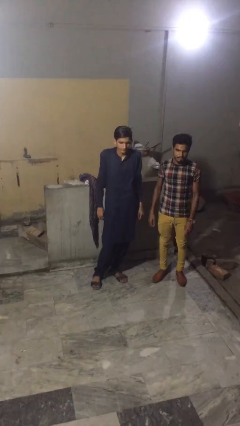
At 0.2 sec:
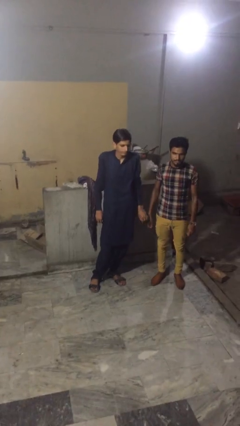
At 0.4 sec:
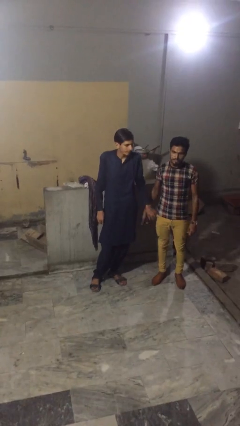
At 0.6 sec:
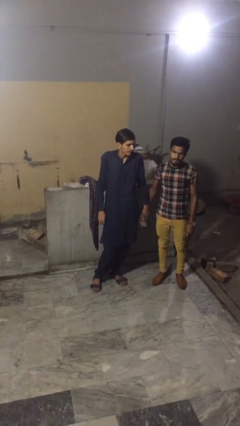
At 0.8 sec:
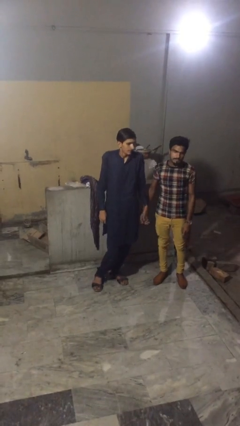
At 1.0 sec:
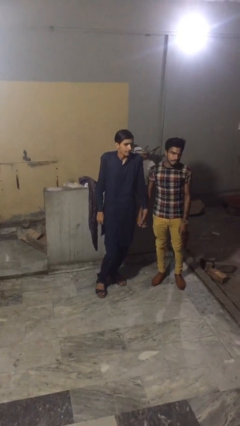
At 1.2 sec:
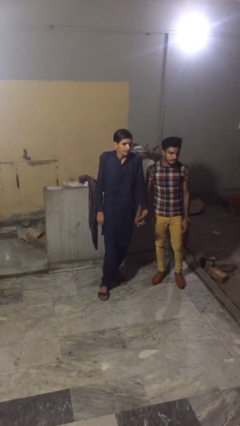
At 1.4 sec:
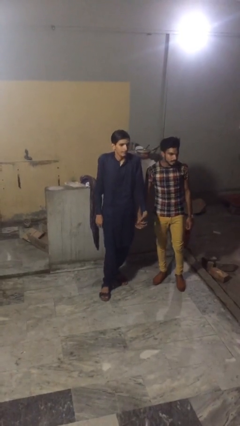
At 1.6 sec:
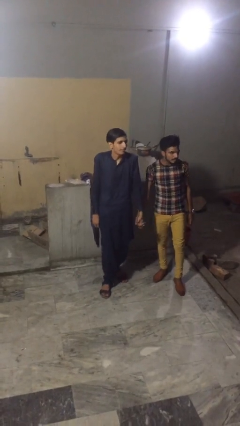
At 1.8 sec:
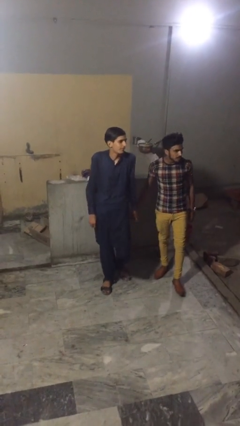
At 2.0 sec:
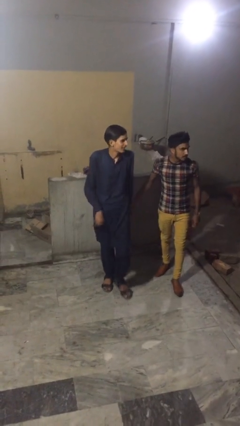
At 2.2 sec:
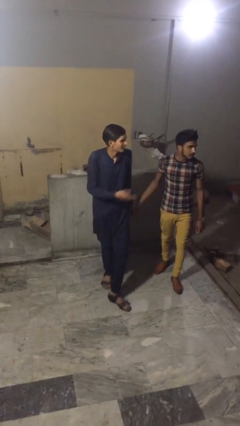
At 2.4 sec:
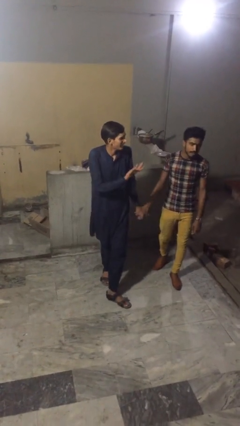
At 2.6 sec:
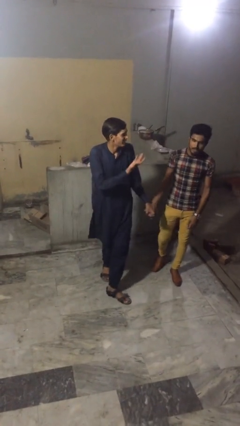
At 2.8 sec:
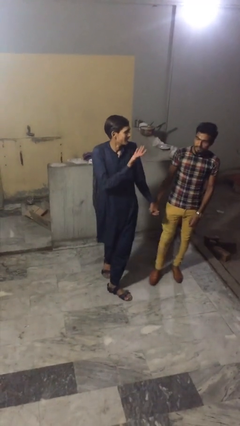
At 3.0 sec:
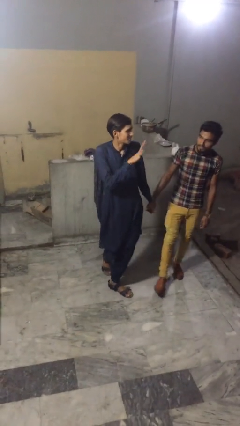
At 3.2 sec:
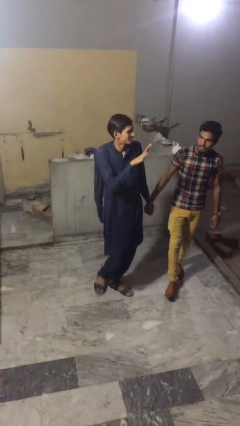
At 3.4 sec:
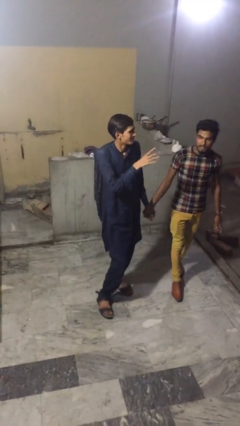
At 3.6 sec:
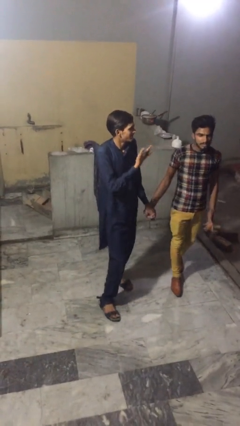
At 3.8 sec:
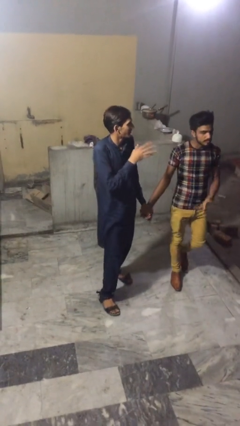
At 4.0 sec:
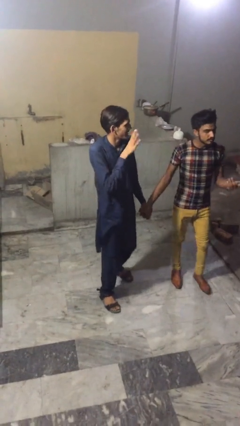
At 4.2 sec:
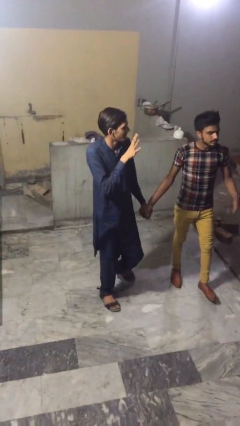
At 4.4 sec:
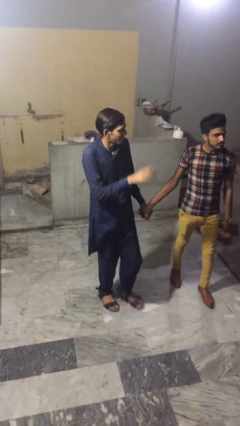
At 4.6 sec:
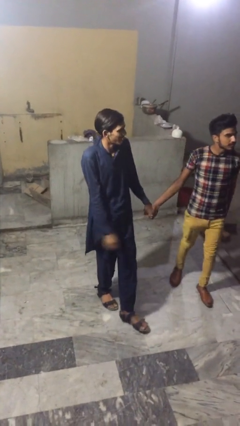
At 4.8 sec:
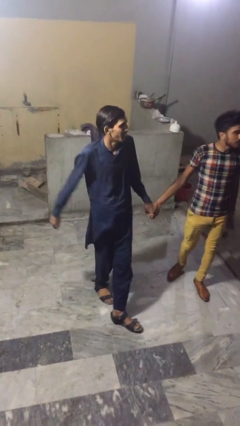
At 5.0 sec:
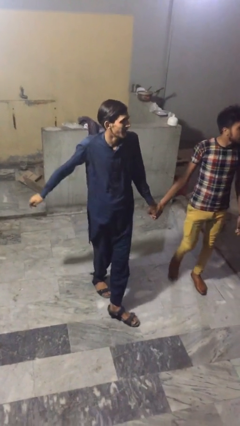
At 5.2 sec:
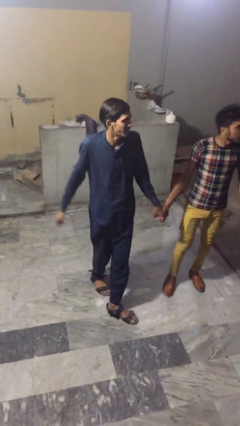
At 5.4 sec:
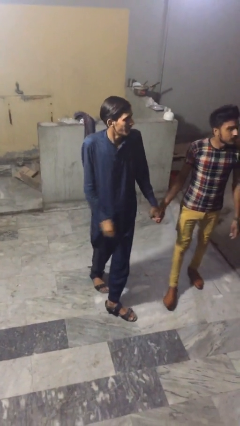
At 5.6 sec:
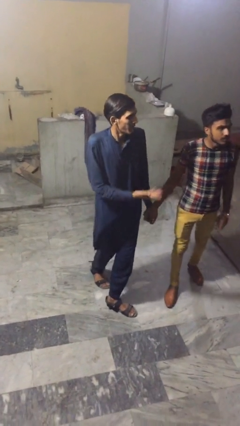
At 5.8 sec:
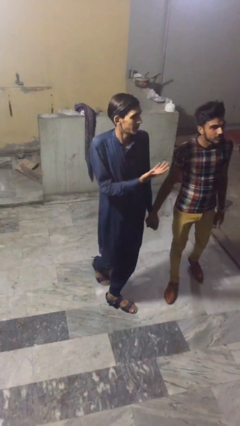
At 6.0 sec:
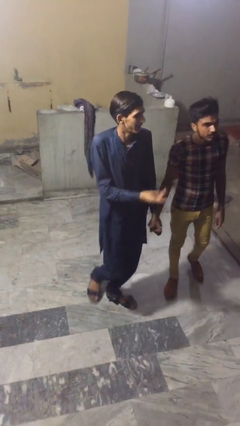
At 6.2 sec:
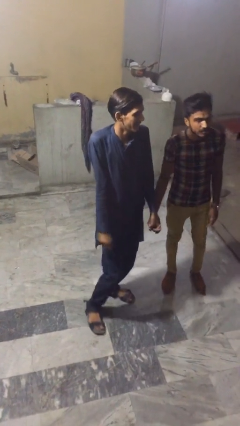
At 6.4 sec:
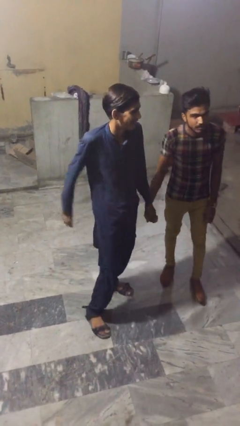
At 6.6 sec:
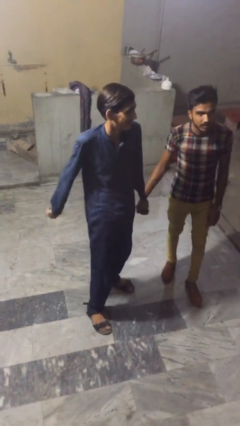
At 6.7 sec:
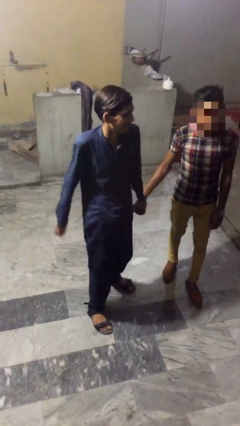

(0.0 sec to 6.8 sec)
person holds hand

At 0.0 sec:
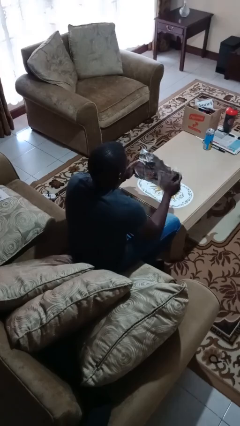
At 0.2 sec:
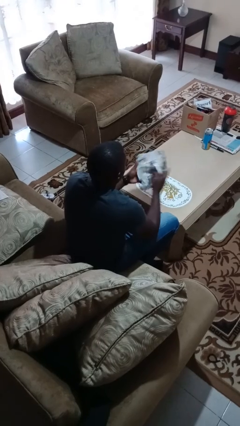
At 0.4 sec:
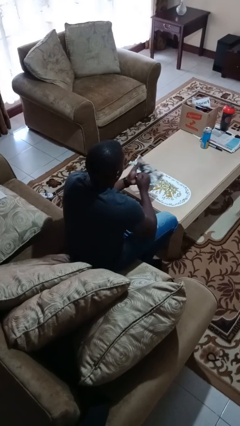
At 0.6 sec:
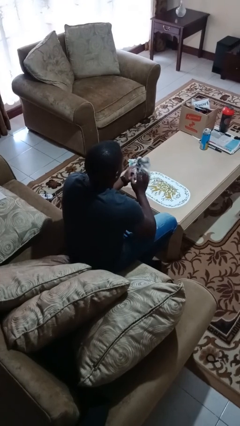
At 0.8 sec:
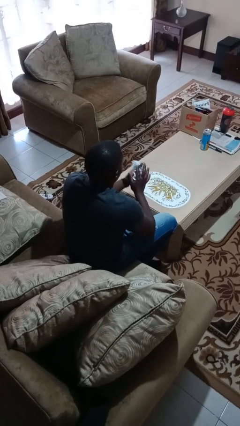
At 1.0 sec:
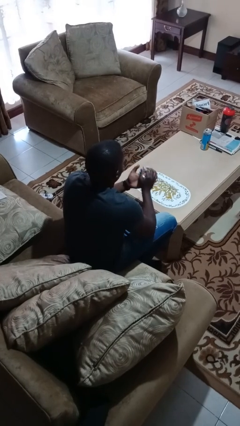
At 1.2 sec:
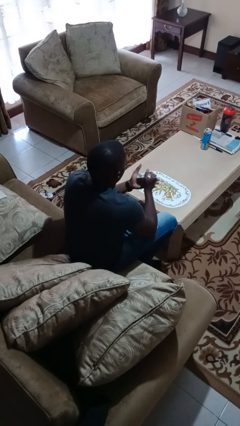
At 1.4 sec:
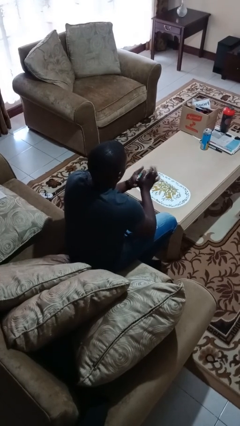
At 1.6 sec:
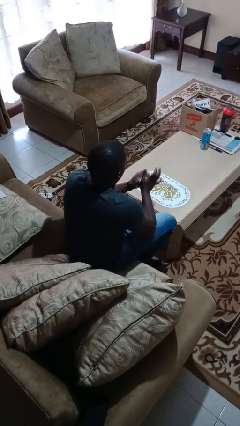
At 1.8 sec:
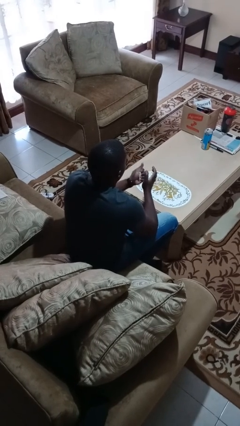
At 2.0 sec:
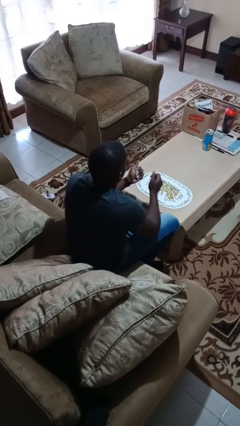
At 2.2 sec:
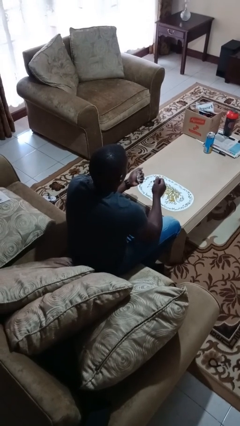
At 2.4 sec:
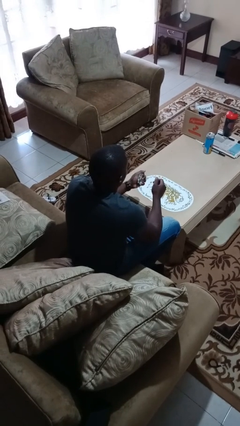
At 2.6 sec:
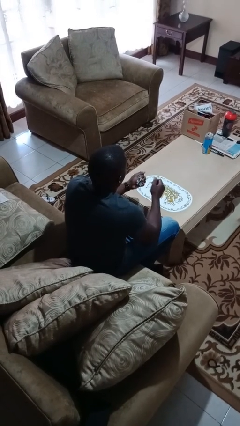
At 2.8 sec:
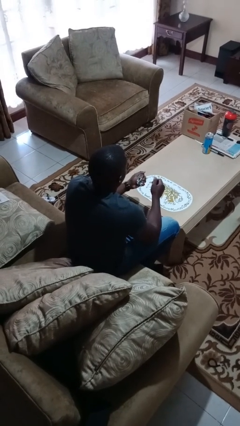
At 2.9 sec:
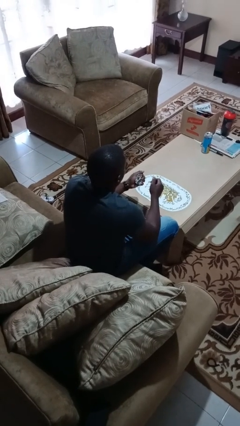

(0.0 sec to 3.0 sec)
person crumples paper

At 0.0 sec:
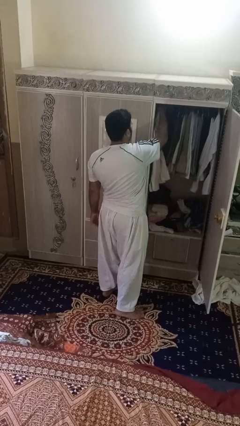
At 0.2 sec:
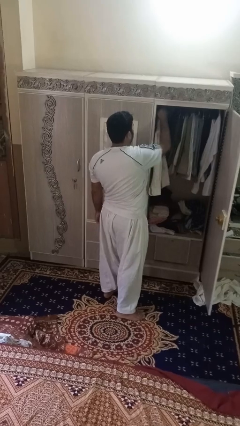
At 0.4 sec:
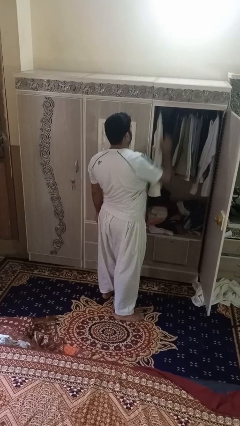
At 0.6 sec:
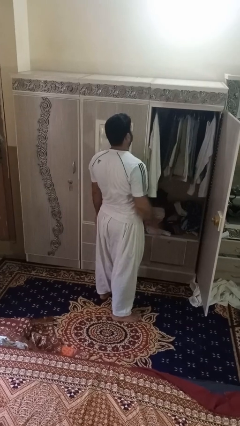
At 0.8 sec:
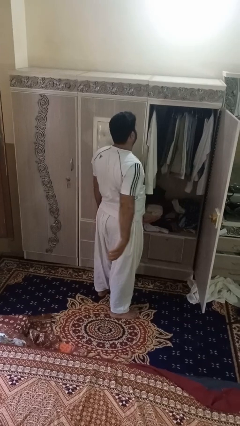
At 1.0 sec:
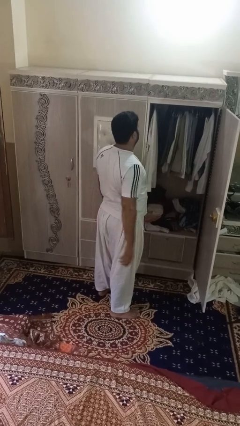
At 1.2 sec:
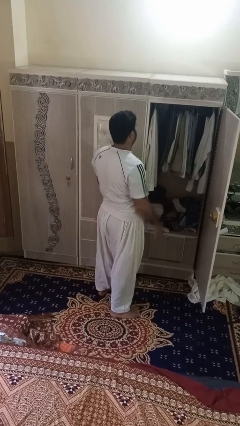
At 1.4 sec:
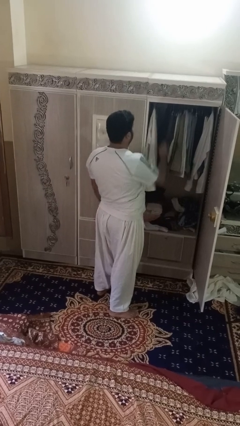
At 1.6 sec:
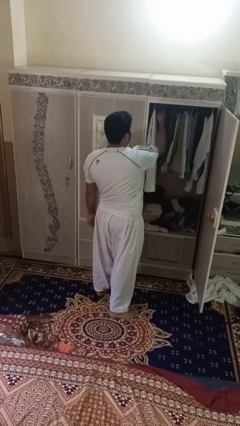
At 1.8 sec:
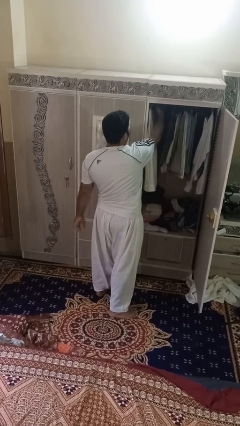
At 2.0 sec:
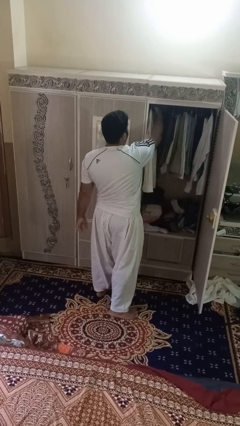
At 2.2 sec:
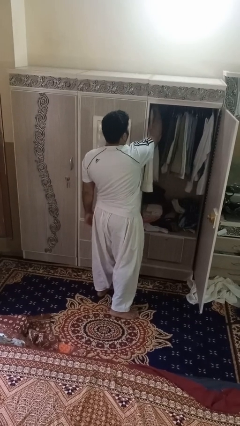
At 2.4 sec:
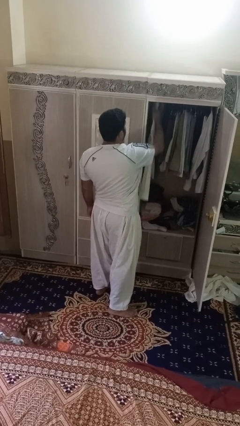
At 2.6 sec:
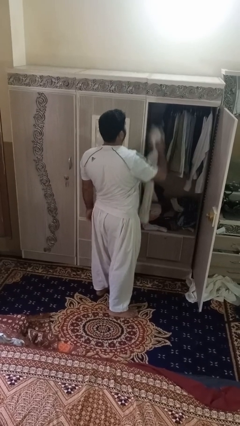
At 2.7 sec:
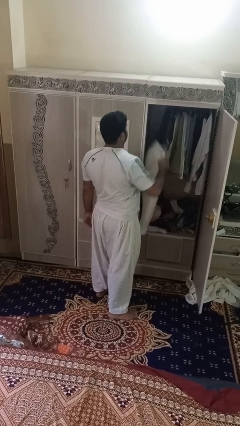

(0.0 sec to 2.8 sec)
person takes clothes from closet

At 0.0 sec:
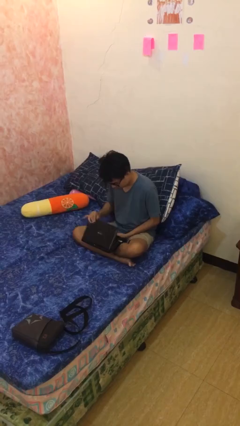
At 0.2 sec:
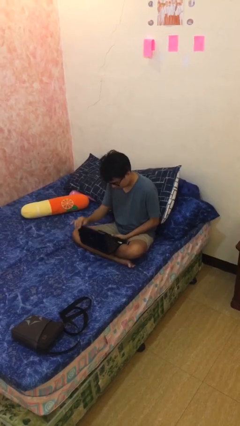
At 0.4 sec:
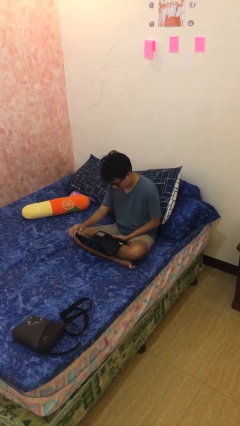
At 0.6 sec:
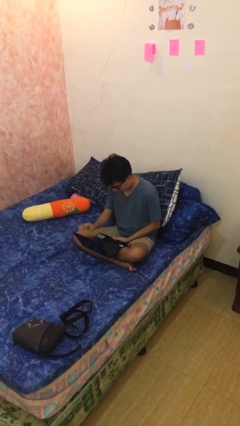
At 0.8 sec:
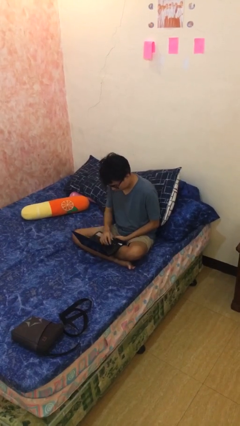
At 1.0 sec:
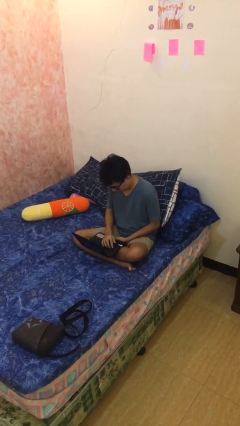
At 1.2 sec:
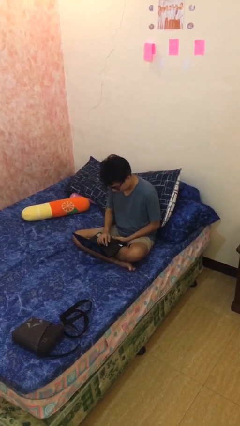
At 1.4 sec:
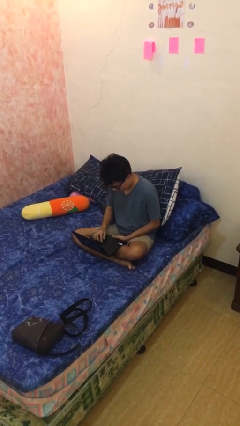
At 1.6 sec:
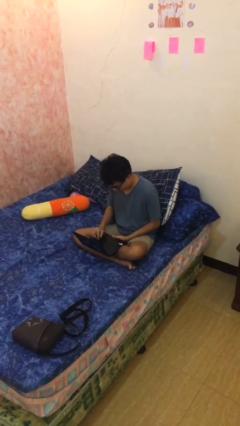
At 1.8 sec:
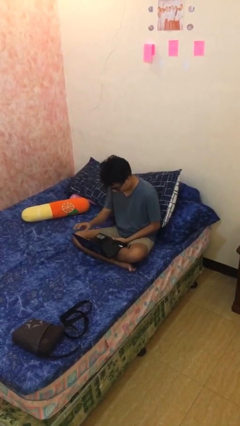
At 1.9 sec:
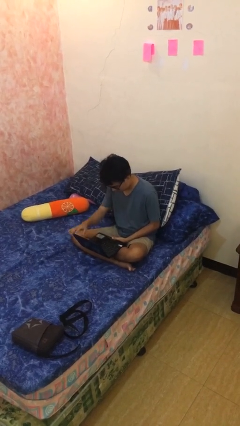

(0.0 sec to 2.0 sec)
person interacts with laptop

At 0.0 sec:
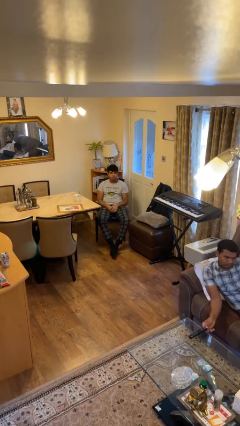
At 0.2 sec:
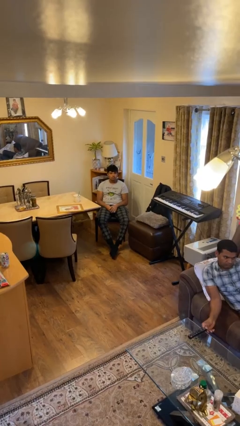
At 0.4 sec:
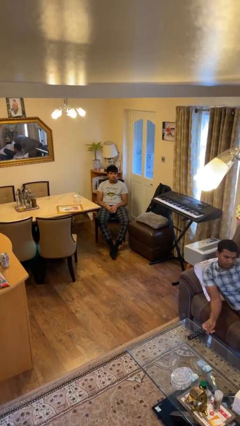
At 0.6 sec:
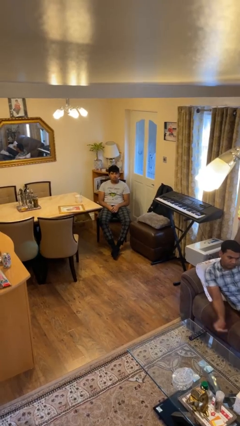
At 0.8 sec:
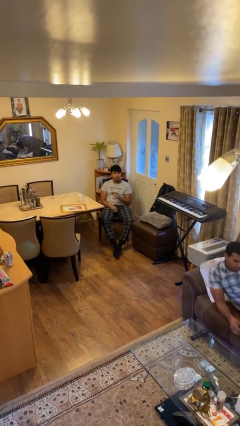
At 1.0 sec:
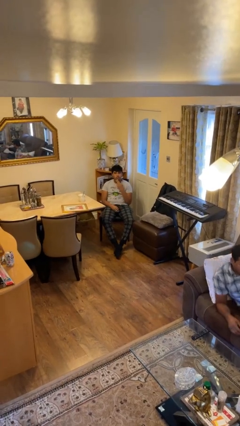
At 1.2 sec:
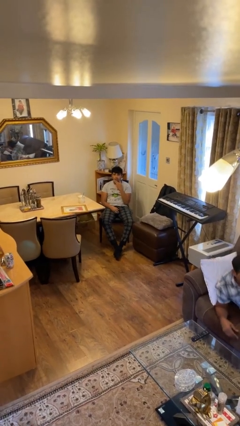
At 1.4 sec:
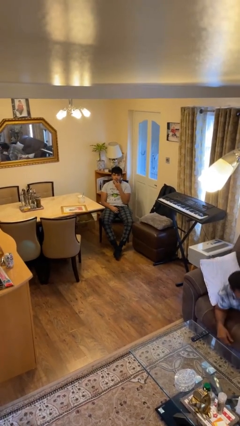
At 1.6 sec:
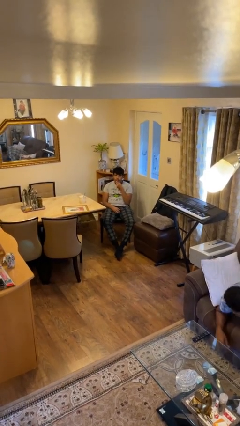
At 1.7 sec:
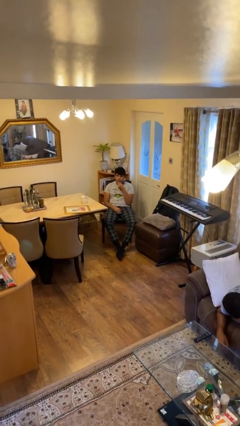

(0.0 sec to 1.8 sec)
person strokes chin

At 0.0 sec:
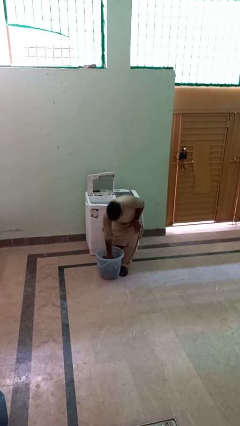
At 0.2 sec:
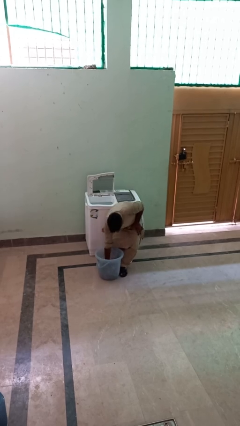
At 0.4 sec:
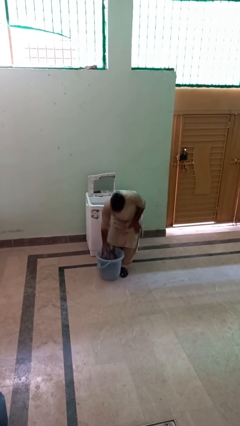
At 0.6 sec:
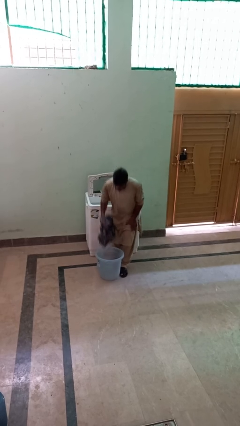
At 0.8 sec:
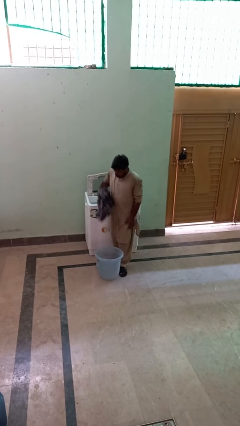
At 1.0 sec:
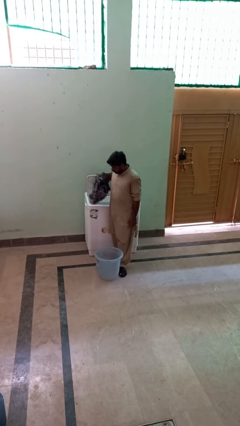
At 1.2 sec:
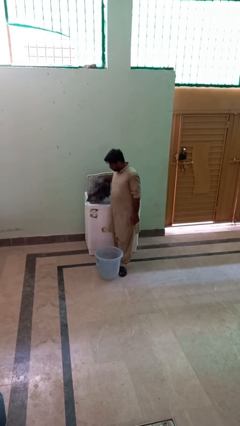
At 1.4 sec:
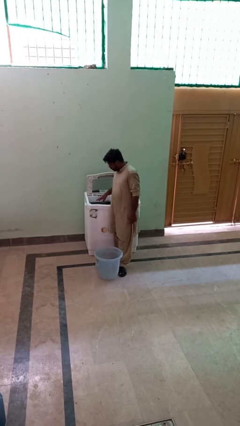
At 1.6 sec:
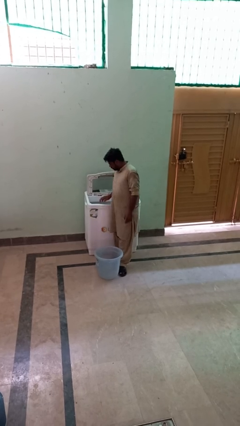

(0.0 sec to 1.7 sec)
person loads clotheswasher
